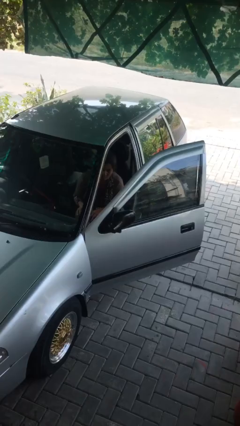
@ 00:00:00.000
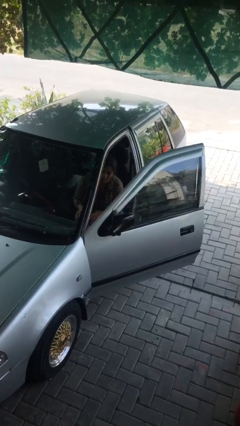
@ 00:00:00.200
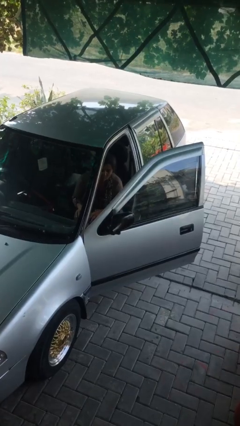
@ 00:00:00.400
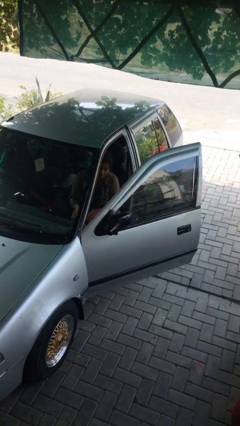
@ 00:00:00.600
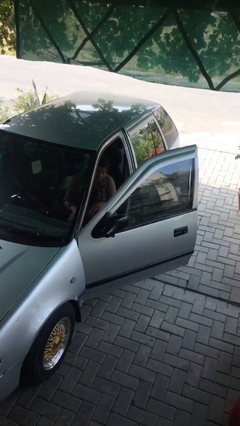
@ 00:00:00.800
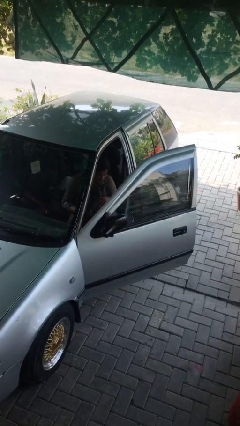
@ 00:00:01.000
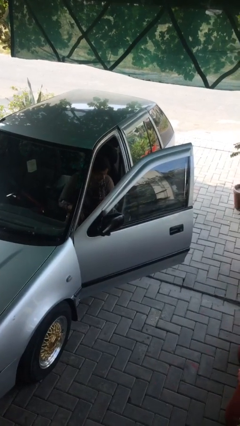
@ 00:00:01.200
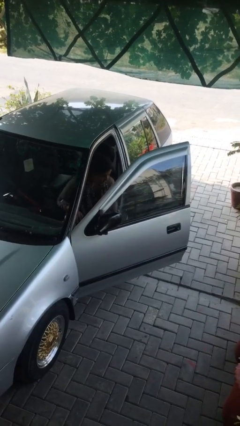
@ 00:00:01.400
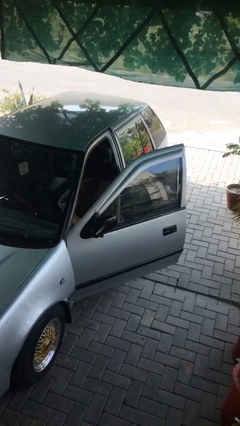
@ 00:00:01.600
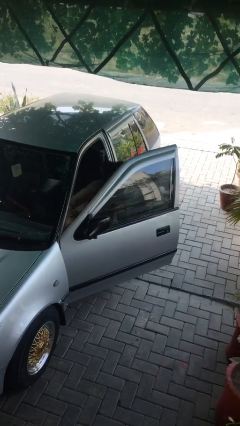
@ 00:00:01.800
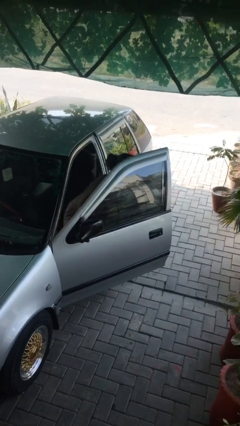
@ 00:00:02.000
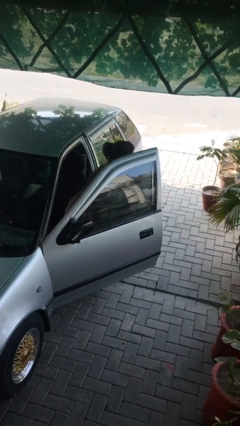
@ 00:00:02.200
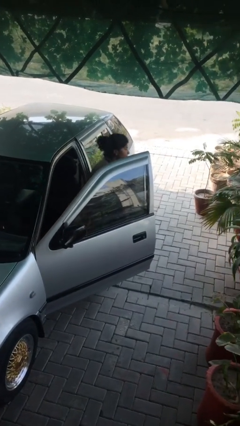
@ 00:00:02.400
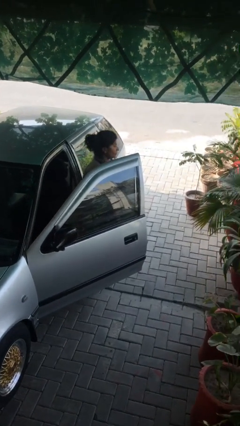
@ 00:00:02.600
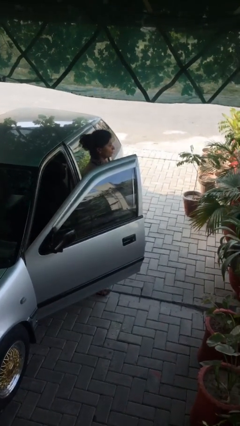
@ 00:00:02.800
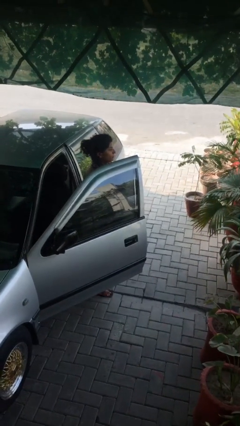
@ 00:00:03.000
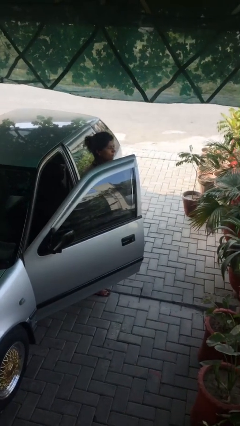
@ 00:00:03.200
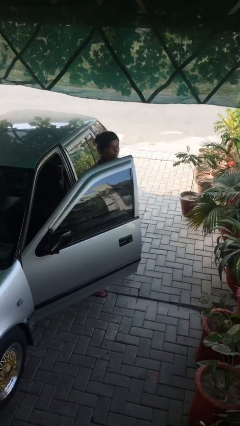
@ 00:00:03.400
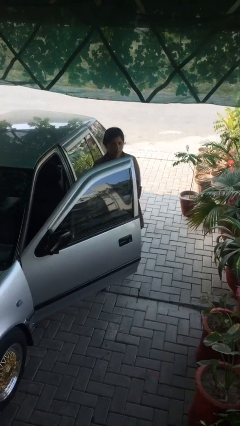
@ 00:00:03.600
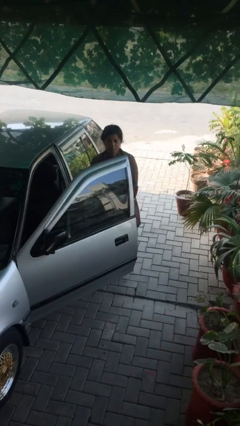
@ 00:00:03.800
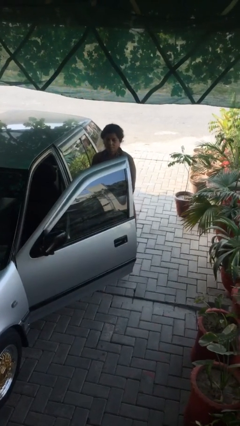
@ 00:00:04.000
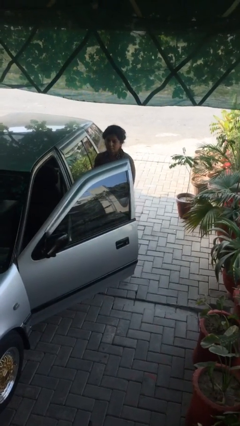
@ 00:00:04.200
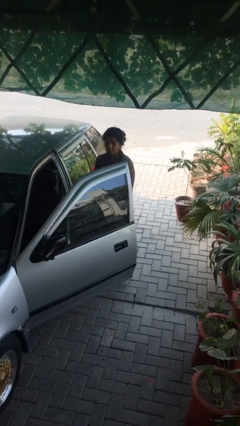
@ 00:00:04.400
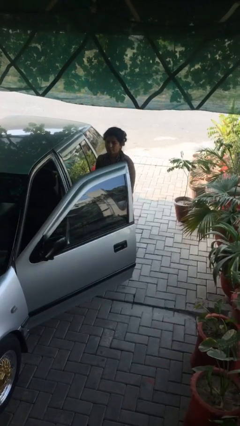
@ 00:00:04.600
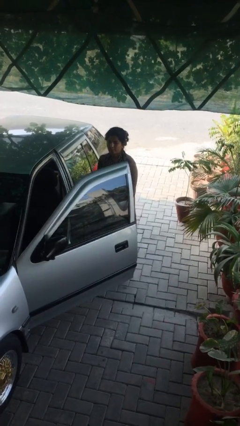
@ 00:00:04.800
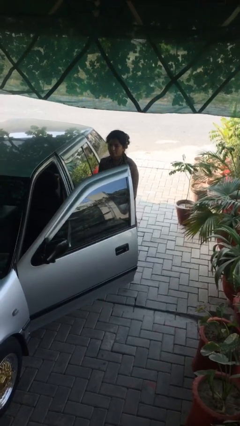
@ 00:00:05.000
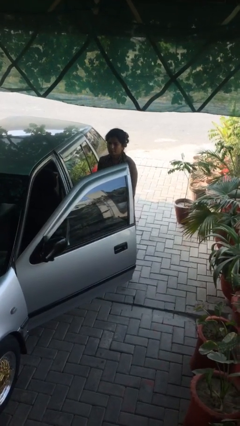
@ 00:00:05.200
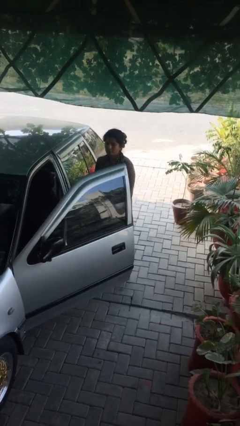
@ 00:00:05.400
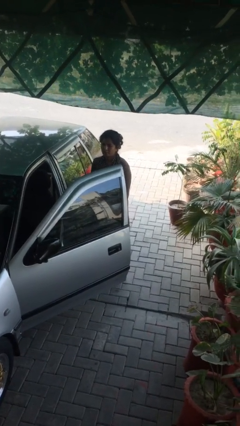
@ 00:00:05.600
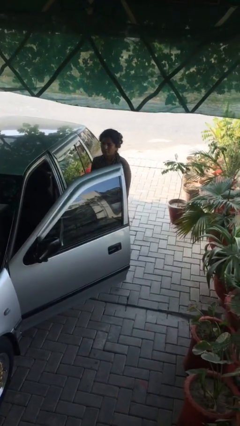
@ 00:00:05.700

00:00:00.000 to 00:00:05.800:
person exits car

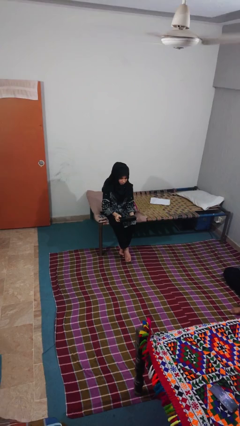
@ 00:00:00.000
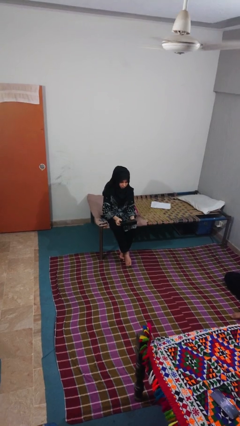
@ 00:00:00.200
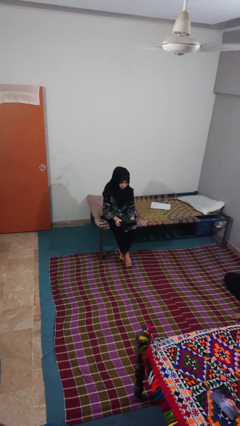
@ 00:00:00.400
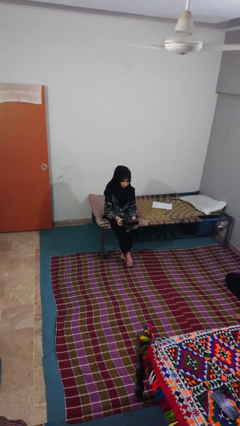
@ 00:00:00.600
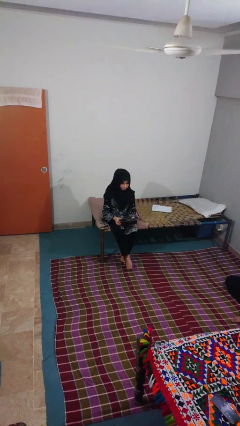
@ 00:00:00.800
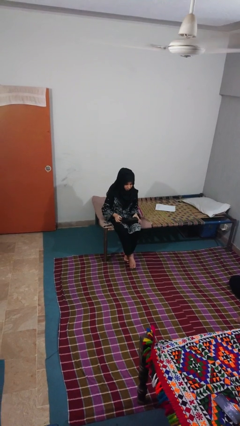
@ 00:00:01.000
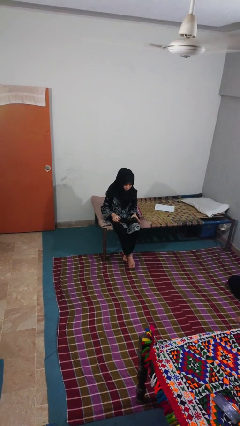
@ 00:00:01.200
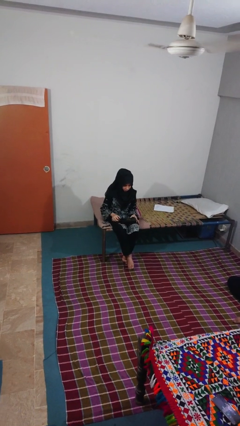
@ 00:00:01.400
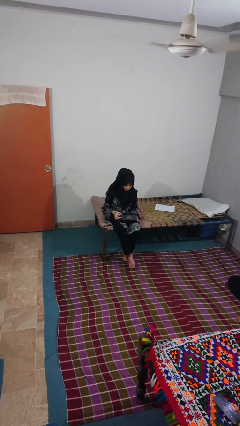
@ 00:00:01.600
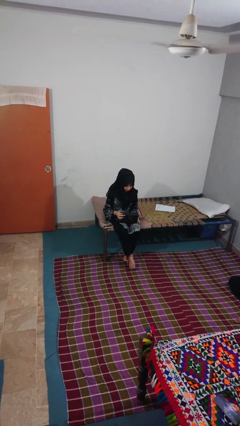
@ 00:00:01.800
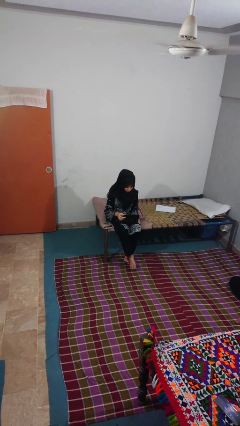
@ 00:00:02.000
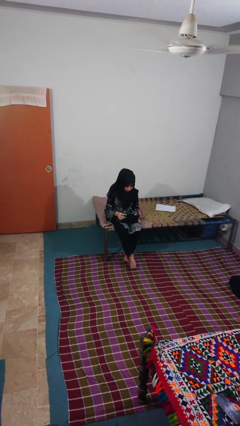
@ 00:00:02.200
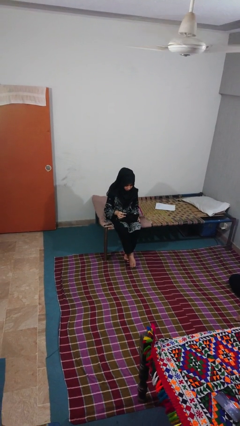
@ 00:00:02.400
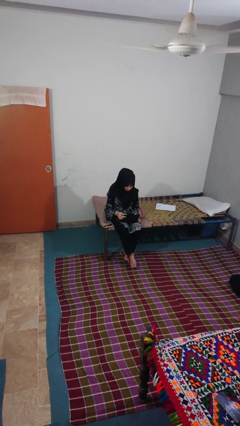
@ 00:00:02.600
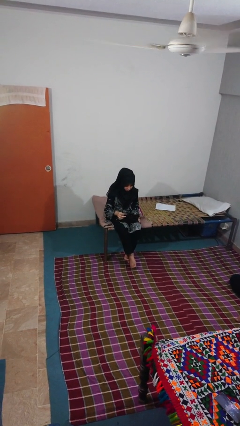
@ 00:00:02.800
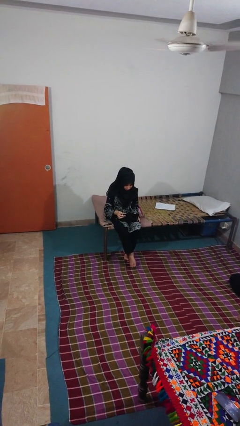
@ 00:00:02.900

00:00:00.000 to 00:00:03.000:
person opens jewelry box

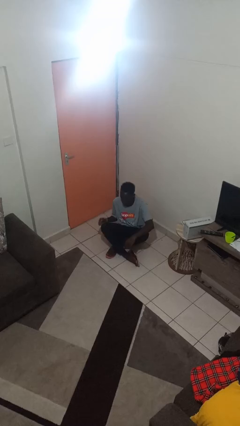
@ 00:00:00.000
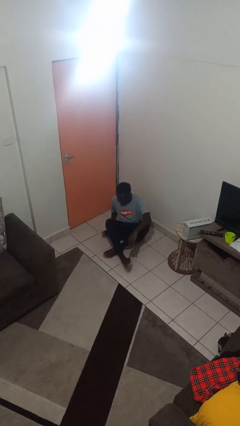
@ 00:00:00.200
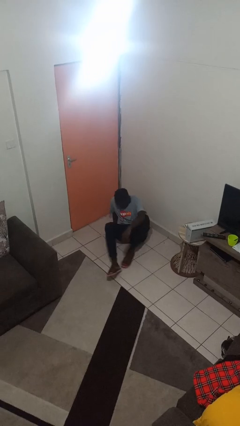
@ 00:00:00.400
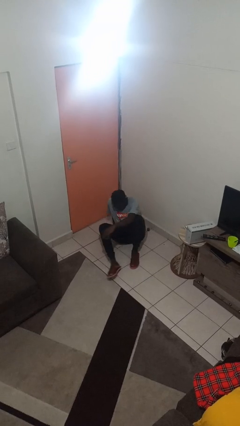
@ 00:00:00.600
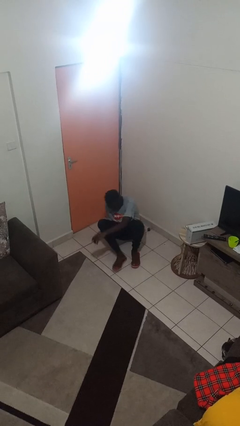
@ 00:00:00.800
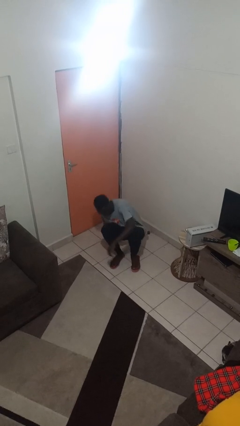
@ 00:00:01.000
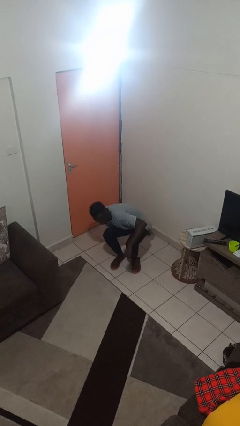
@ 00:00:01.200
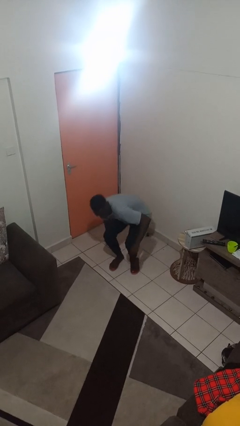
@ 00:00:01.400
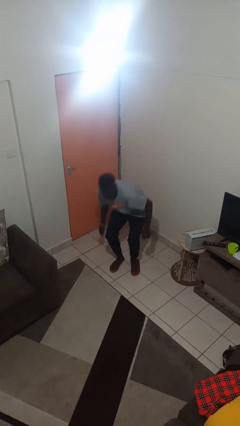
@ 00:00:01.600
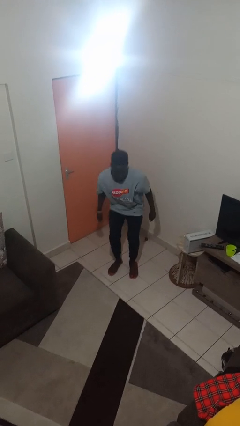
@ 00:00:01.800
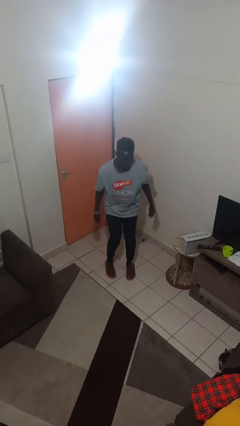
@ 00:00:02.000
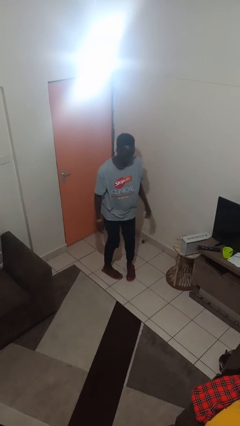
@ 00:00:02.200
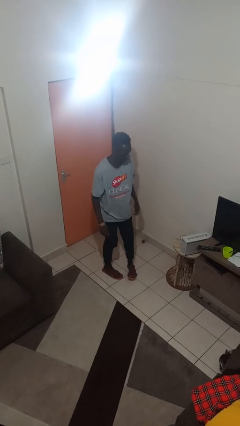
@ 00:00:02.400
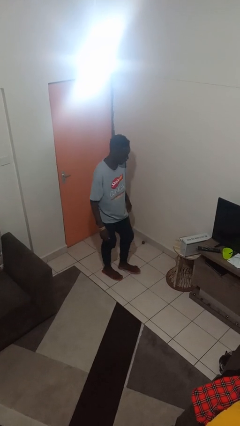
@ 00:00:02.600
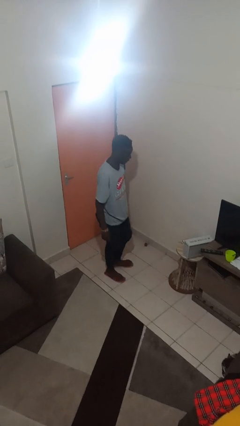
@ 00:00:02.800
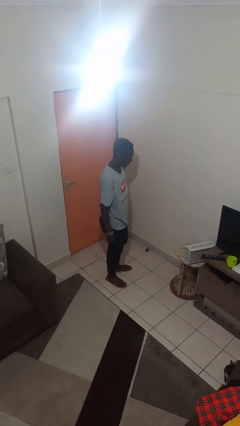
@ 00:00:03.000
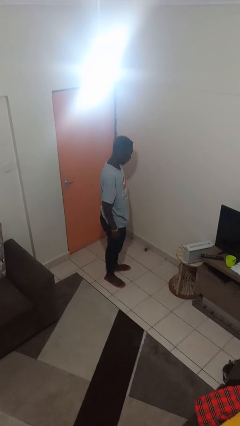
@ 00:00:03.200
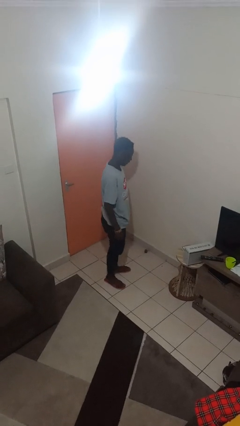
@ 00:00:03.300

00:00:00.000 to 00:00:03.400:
person stands up from floor

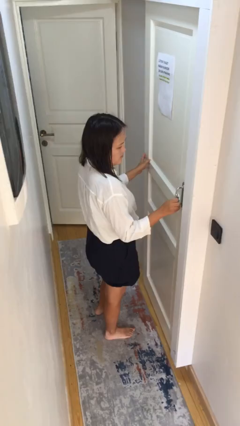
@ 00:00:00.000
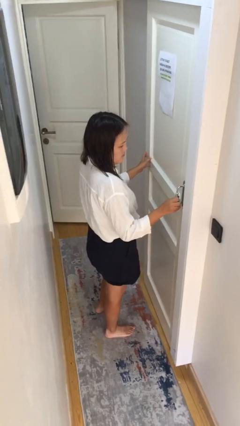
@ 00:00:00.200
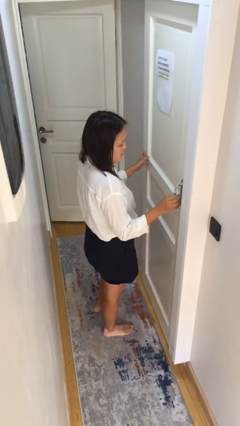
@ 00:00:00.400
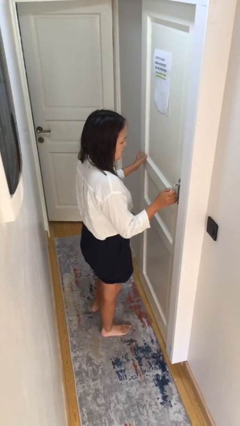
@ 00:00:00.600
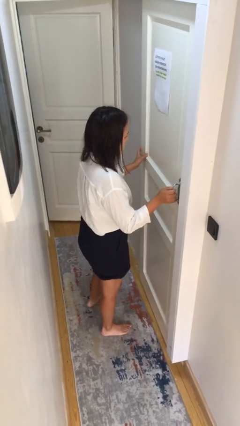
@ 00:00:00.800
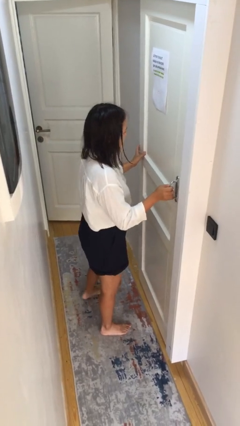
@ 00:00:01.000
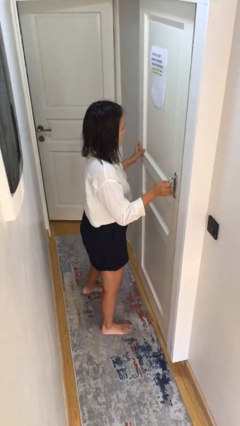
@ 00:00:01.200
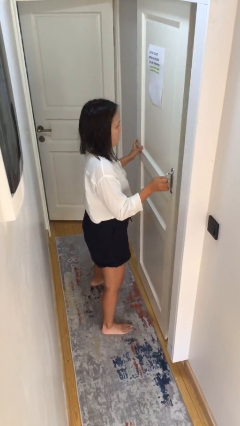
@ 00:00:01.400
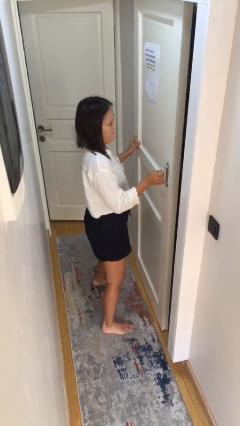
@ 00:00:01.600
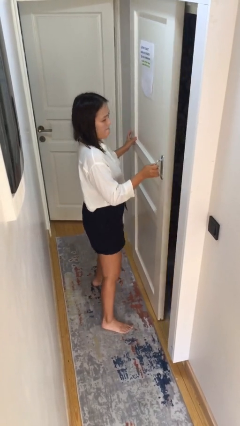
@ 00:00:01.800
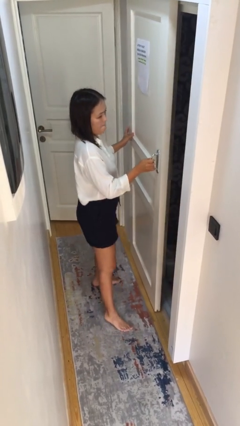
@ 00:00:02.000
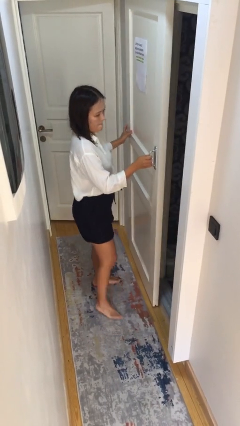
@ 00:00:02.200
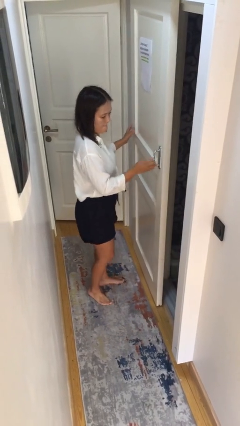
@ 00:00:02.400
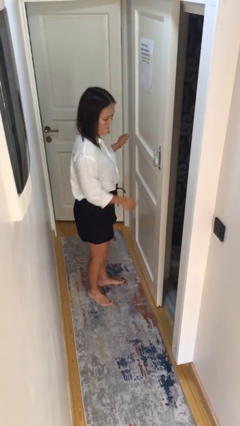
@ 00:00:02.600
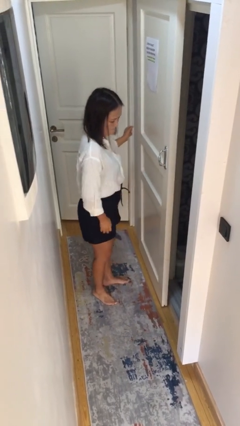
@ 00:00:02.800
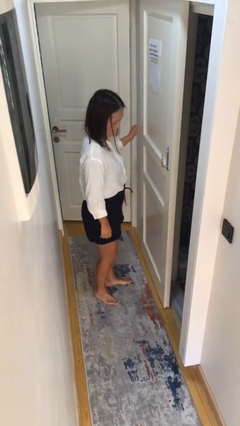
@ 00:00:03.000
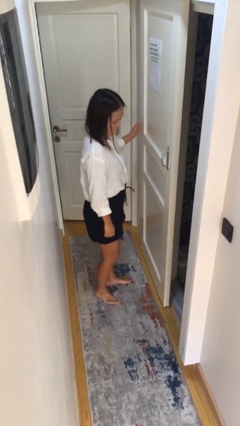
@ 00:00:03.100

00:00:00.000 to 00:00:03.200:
person opens sliding door

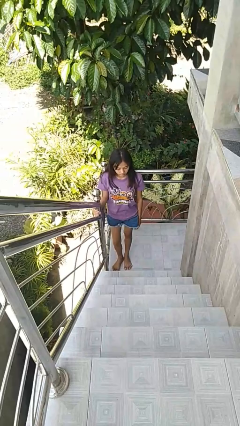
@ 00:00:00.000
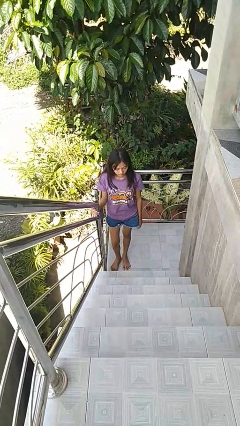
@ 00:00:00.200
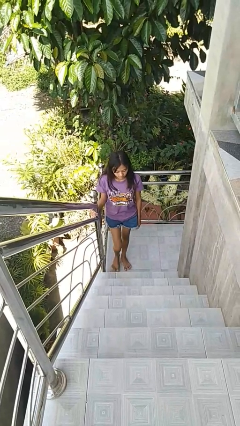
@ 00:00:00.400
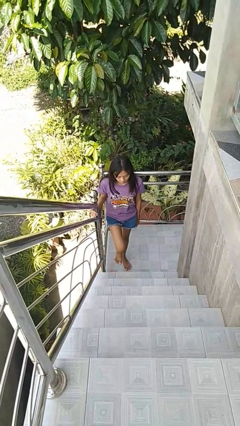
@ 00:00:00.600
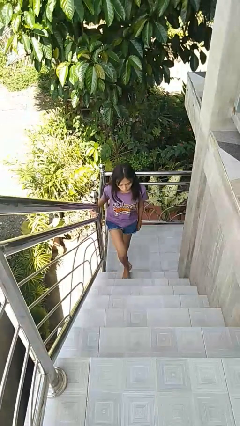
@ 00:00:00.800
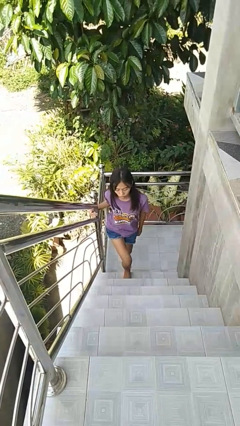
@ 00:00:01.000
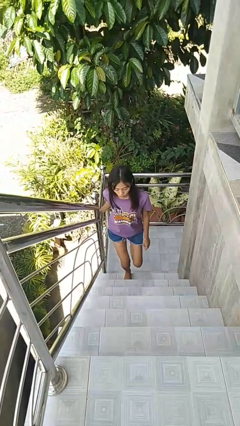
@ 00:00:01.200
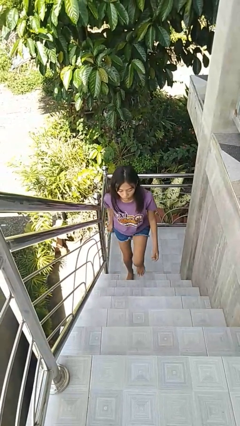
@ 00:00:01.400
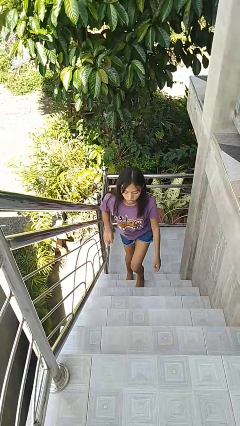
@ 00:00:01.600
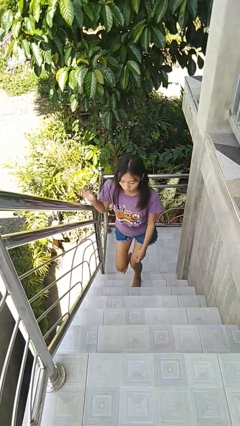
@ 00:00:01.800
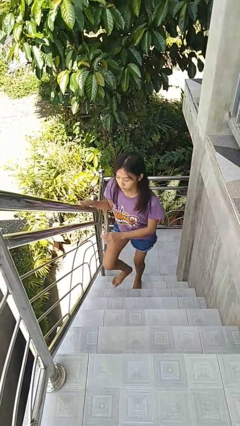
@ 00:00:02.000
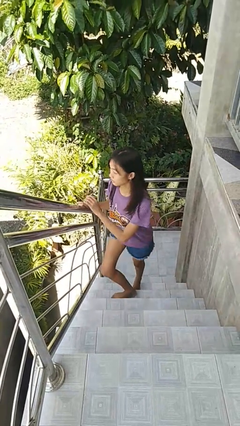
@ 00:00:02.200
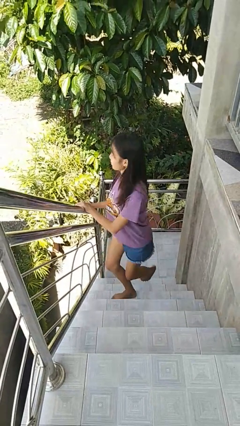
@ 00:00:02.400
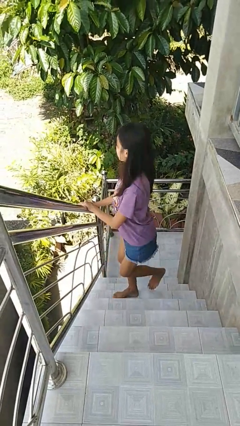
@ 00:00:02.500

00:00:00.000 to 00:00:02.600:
person climbs up stairs
